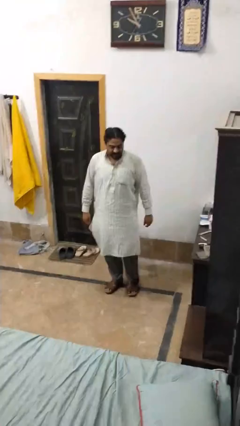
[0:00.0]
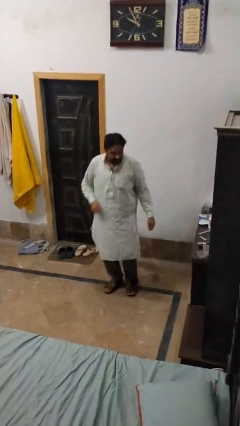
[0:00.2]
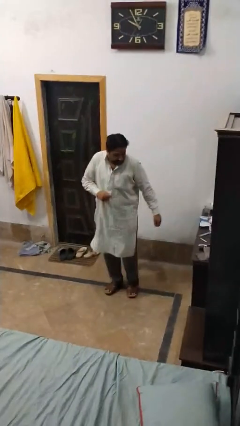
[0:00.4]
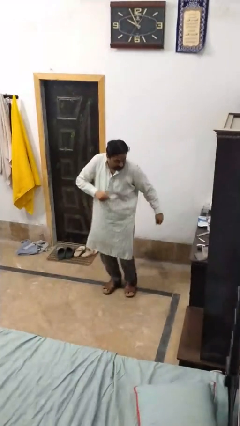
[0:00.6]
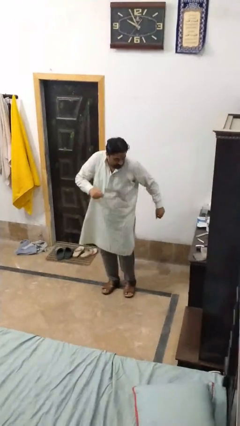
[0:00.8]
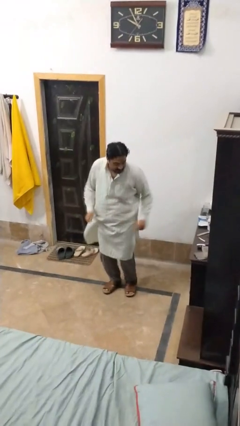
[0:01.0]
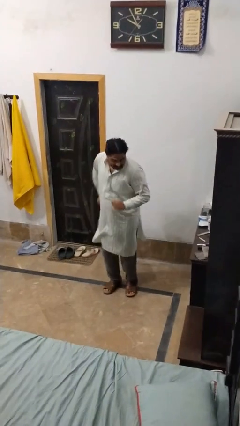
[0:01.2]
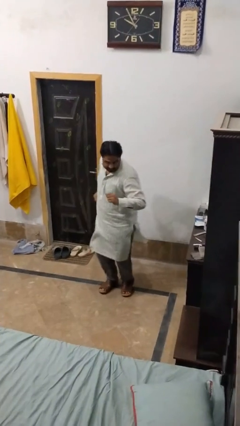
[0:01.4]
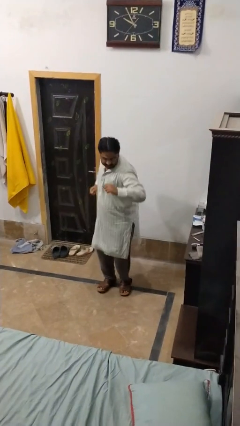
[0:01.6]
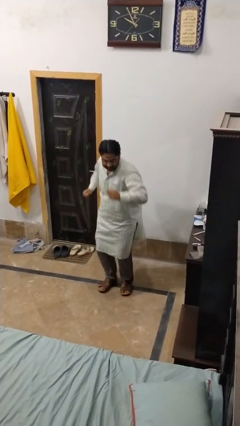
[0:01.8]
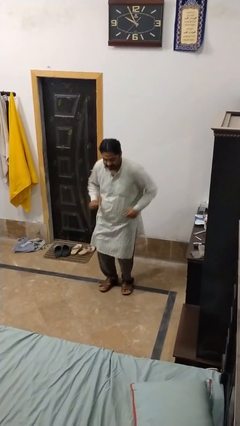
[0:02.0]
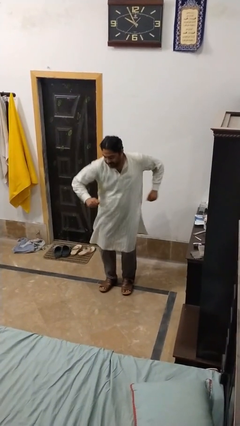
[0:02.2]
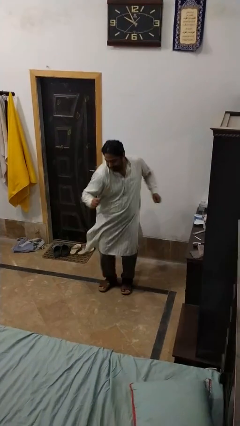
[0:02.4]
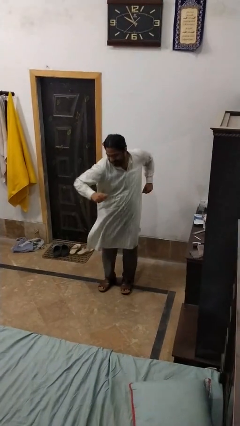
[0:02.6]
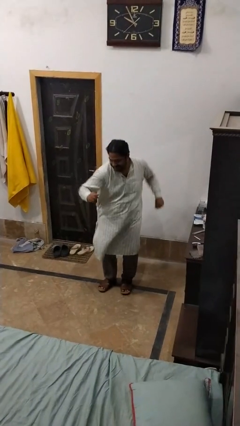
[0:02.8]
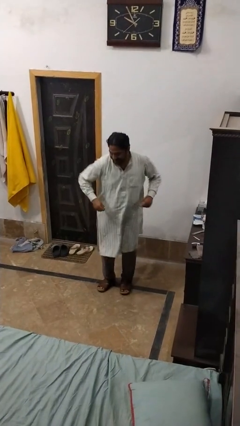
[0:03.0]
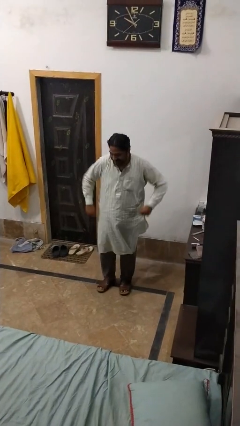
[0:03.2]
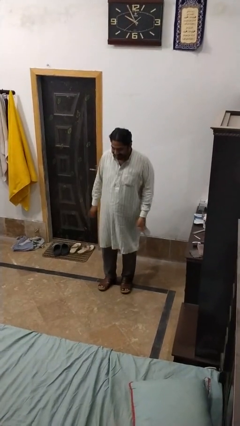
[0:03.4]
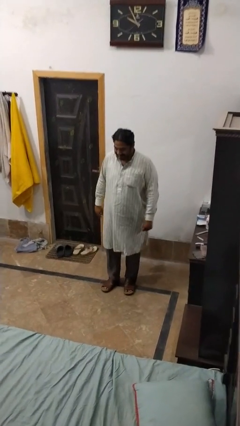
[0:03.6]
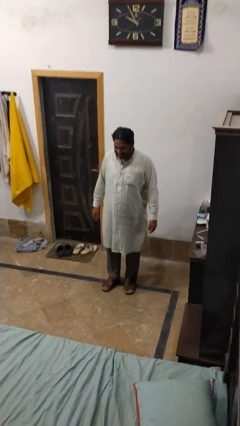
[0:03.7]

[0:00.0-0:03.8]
person dances in place

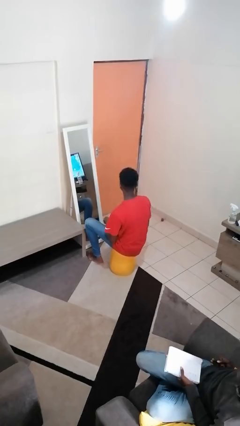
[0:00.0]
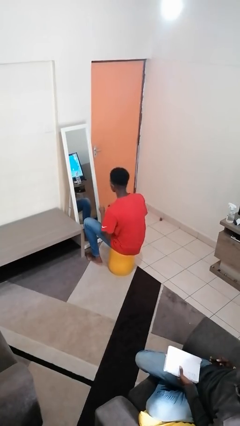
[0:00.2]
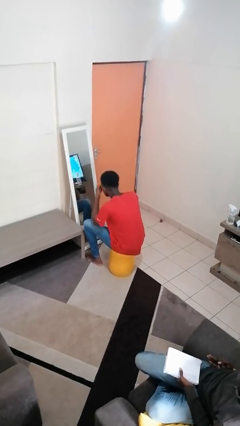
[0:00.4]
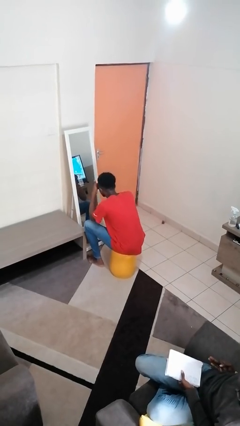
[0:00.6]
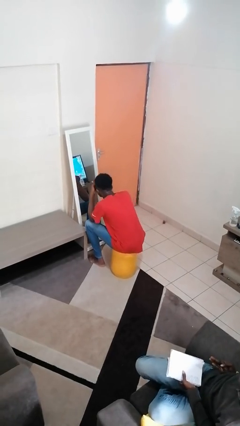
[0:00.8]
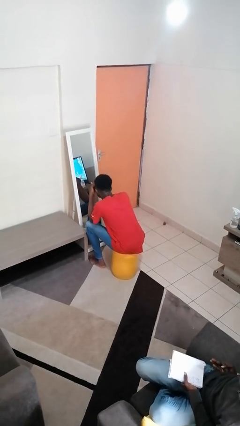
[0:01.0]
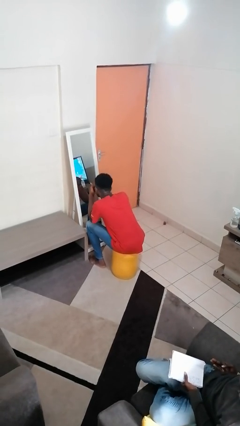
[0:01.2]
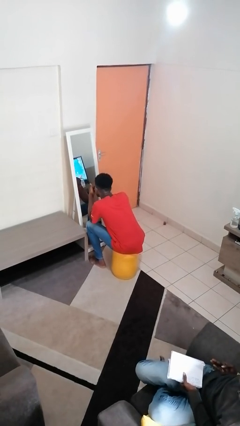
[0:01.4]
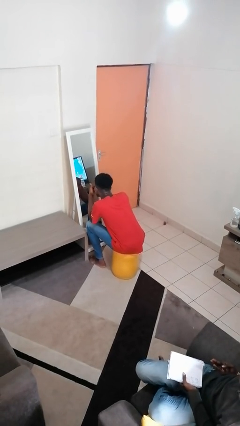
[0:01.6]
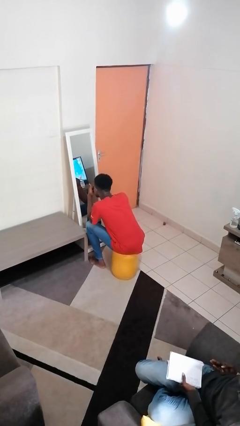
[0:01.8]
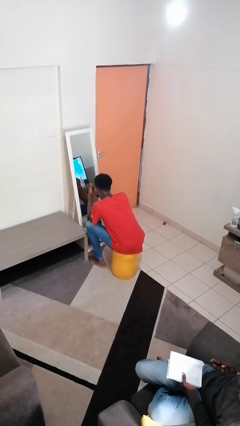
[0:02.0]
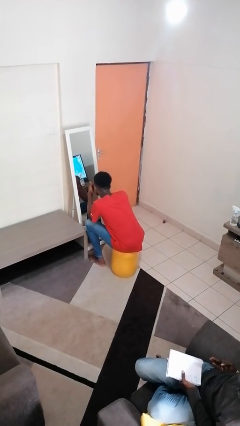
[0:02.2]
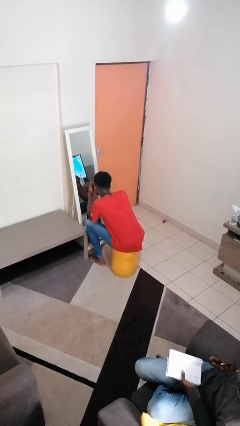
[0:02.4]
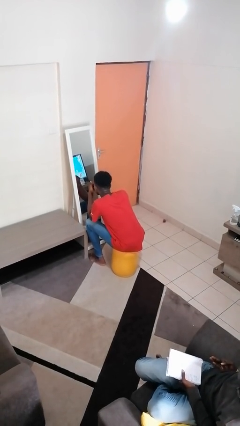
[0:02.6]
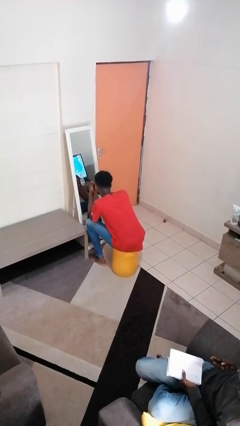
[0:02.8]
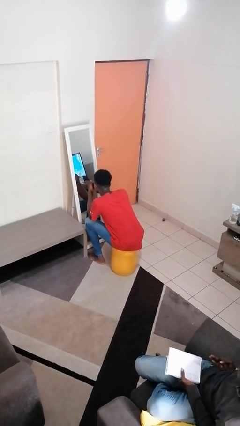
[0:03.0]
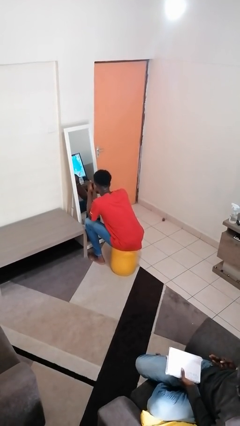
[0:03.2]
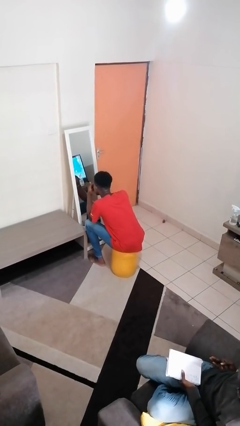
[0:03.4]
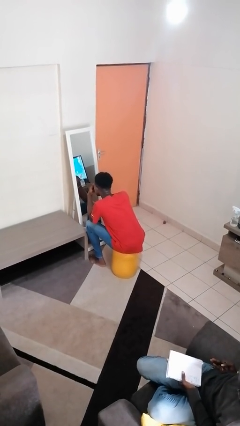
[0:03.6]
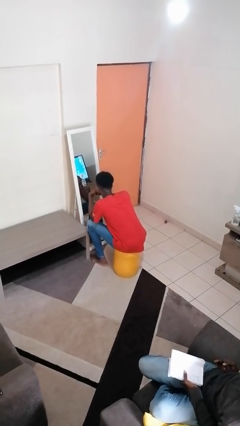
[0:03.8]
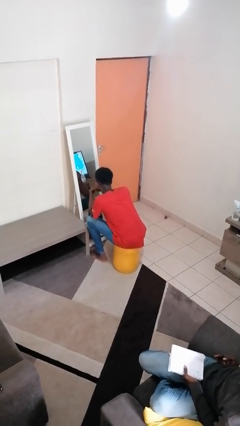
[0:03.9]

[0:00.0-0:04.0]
person applies eye makeup

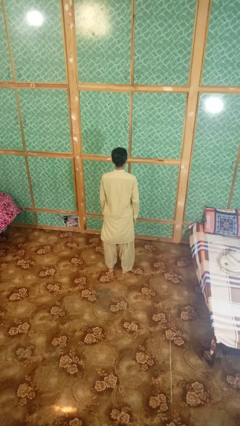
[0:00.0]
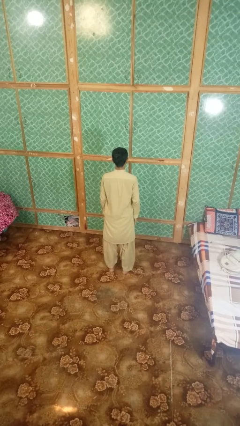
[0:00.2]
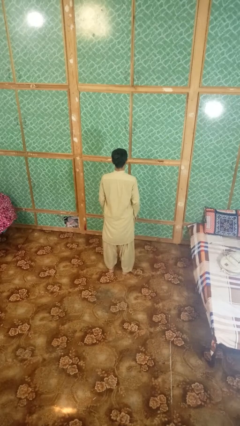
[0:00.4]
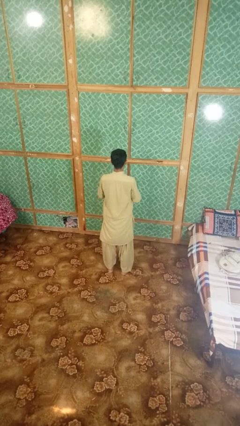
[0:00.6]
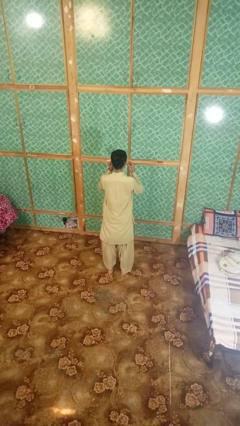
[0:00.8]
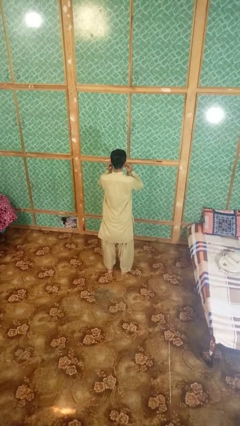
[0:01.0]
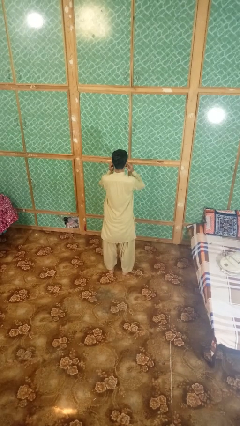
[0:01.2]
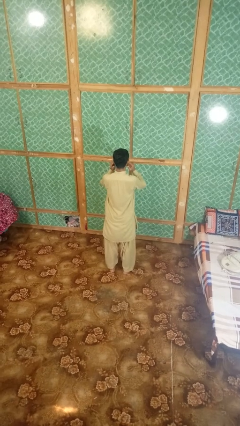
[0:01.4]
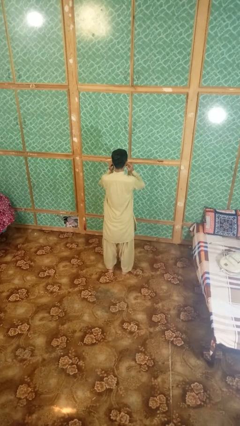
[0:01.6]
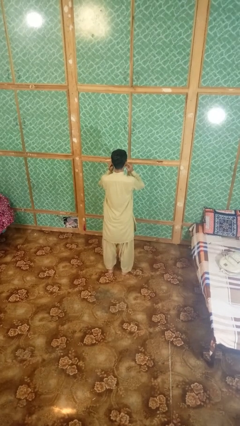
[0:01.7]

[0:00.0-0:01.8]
person puts fingers in ear

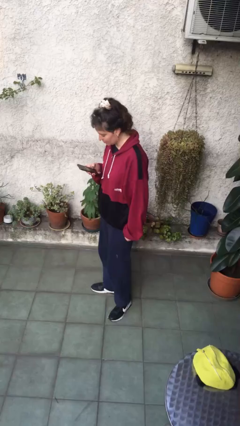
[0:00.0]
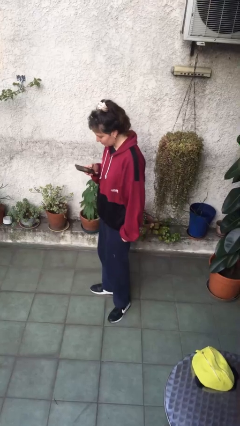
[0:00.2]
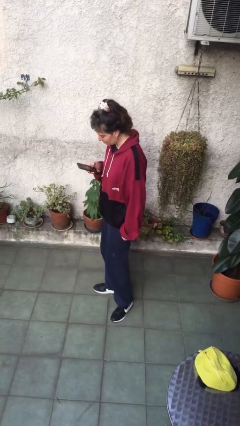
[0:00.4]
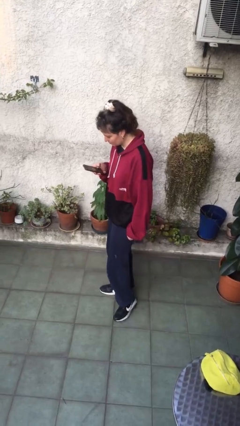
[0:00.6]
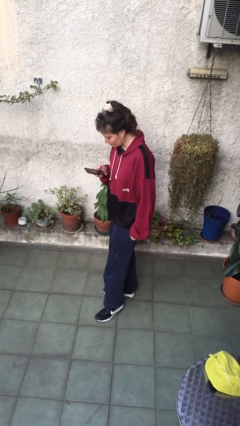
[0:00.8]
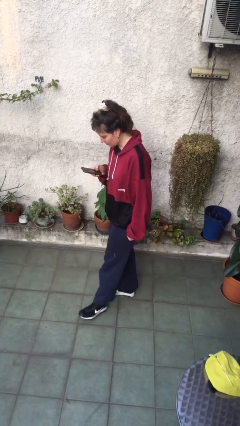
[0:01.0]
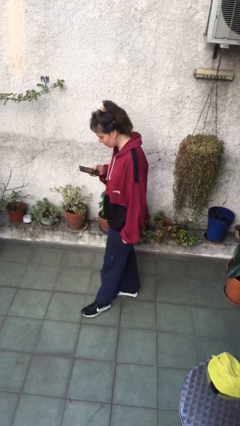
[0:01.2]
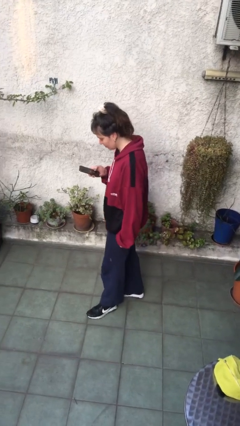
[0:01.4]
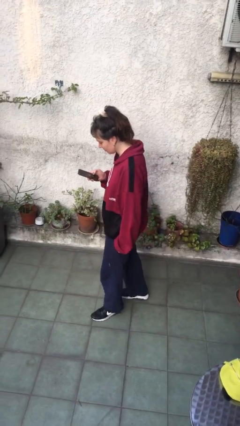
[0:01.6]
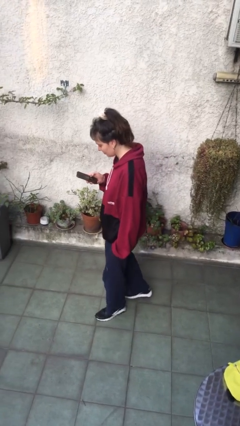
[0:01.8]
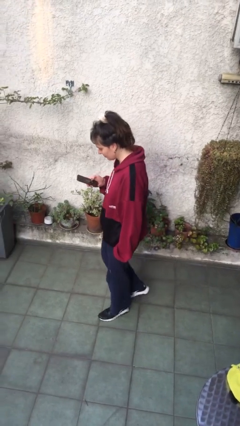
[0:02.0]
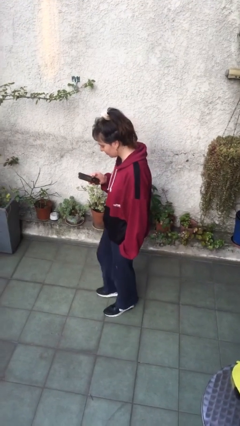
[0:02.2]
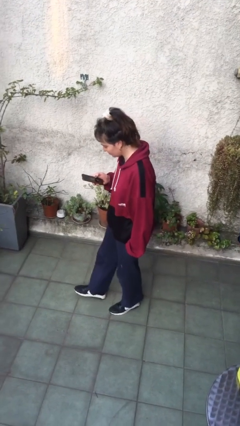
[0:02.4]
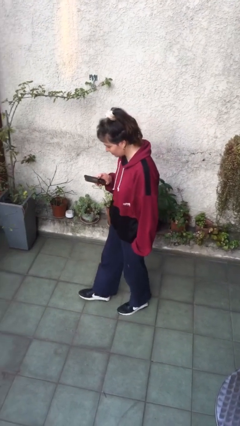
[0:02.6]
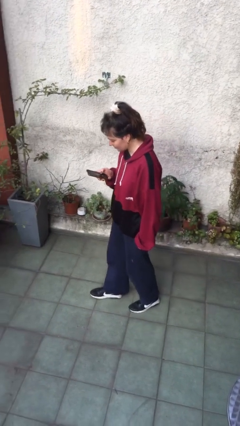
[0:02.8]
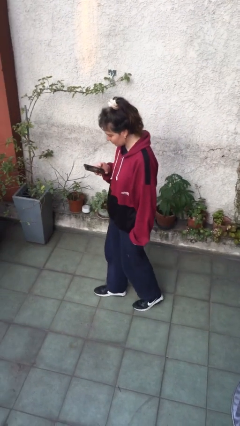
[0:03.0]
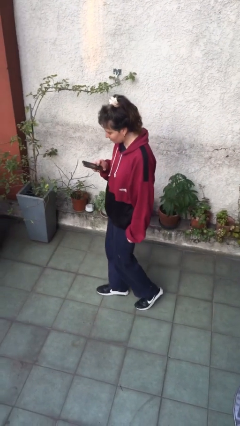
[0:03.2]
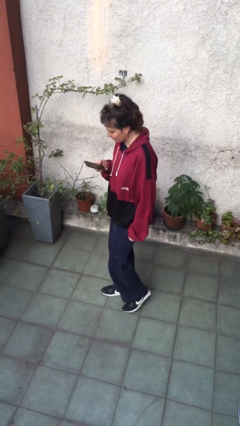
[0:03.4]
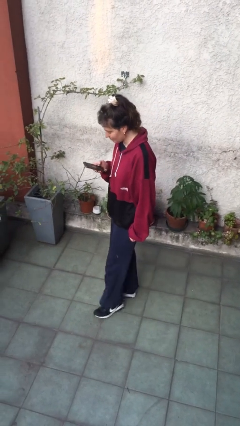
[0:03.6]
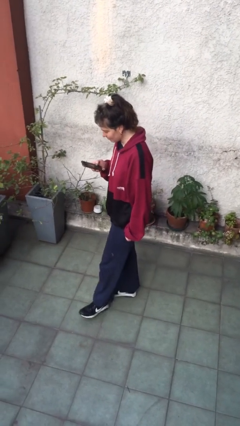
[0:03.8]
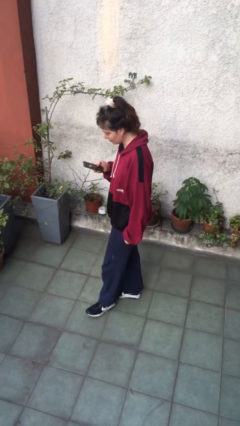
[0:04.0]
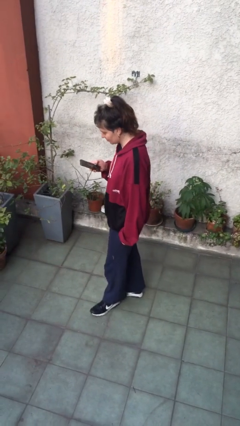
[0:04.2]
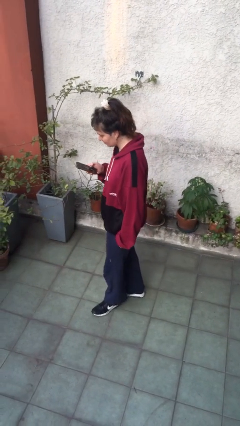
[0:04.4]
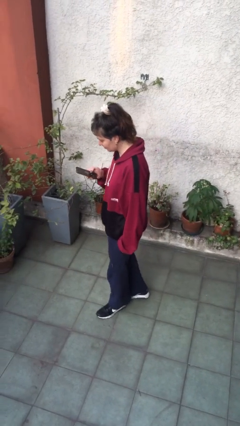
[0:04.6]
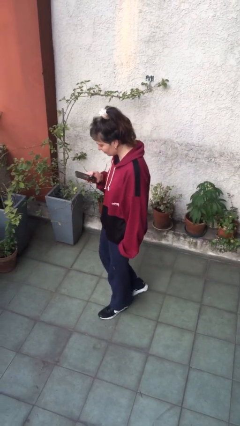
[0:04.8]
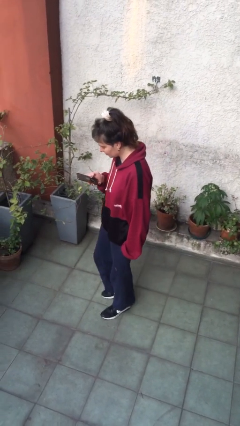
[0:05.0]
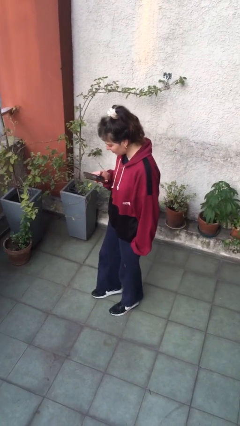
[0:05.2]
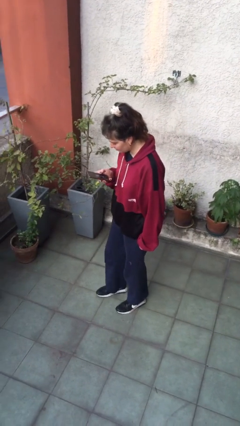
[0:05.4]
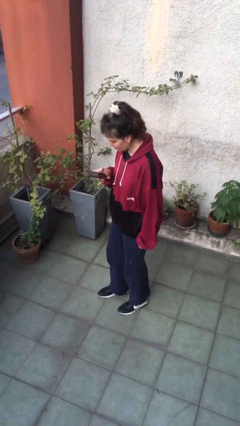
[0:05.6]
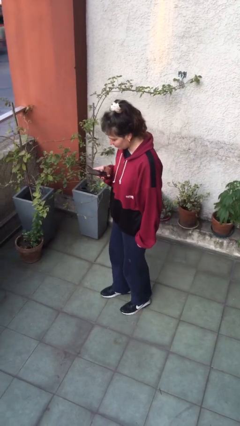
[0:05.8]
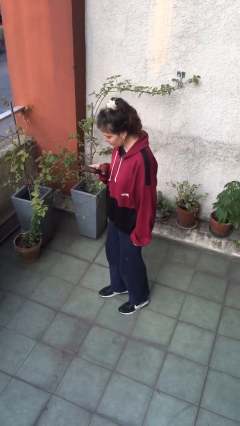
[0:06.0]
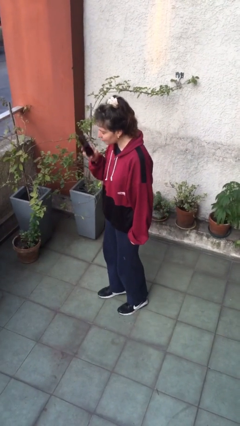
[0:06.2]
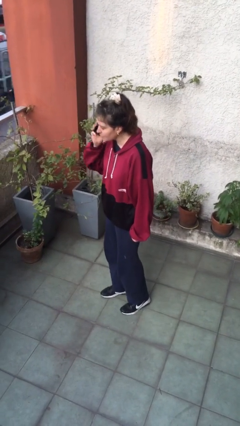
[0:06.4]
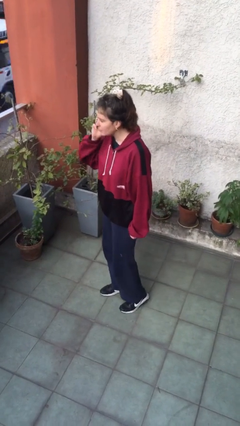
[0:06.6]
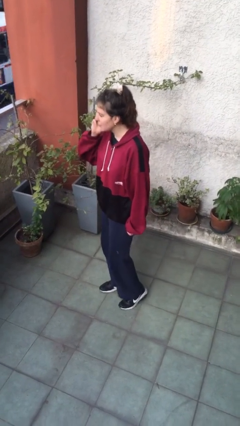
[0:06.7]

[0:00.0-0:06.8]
person texts on phone

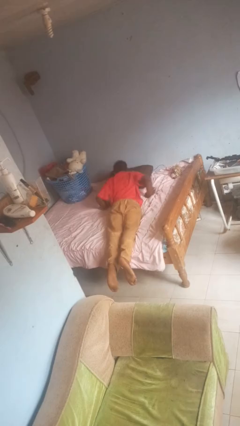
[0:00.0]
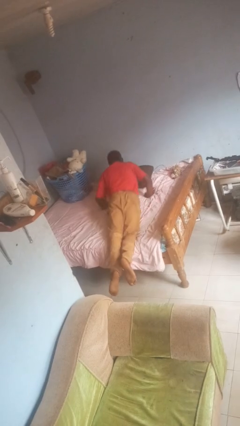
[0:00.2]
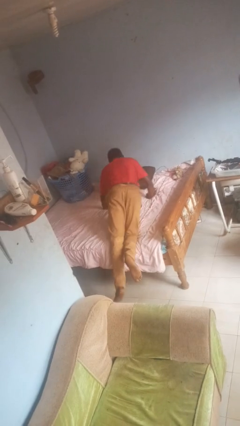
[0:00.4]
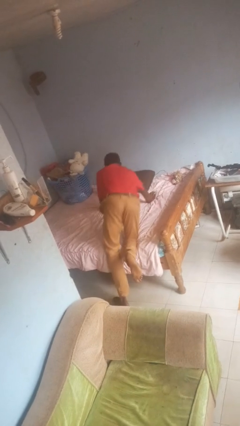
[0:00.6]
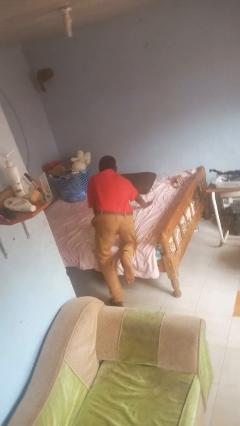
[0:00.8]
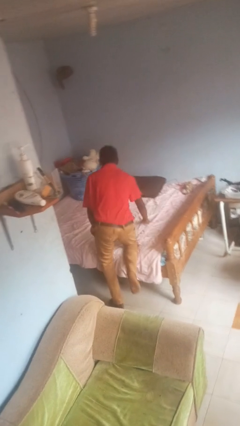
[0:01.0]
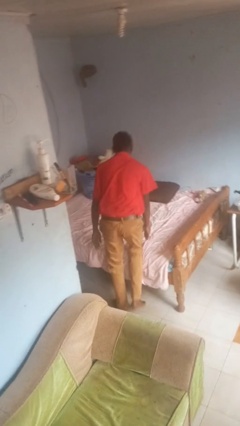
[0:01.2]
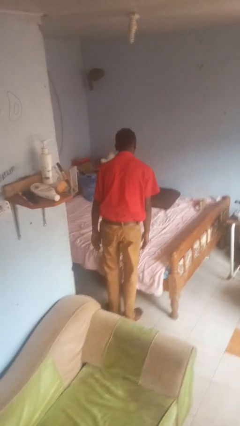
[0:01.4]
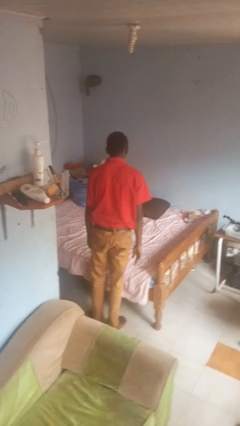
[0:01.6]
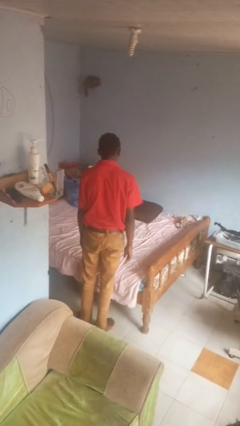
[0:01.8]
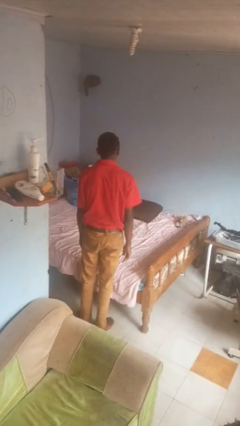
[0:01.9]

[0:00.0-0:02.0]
person stands up
